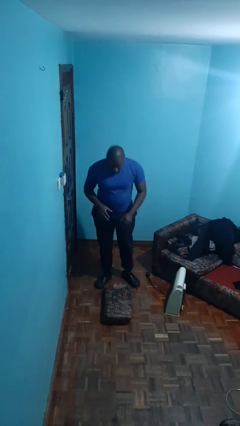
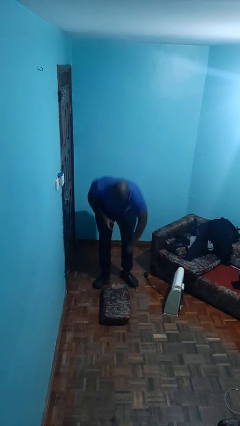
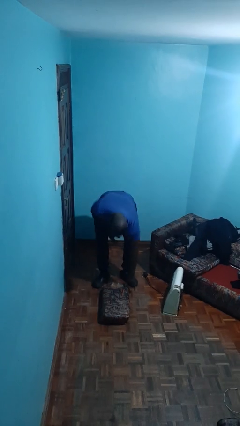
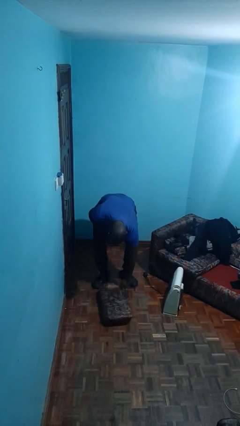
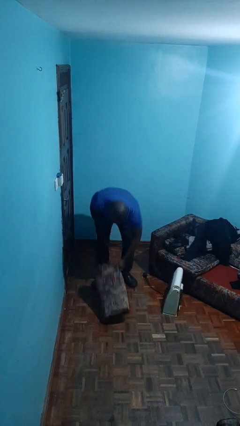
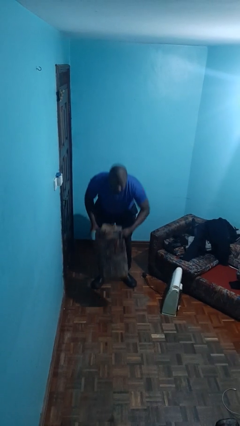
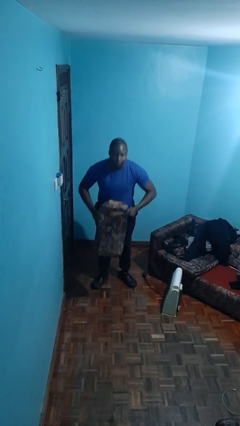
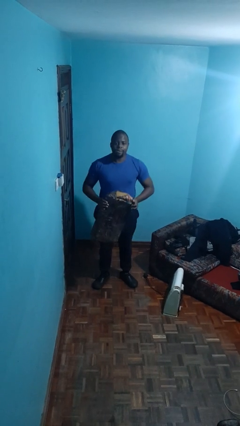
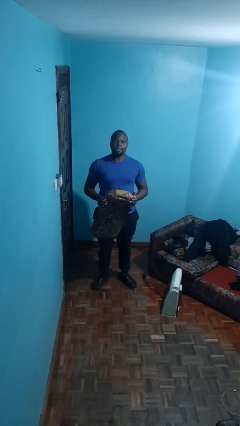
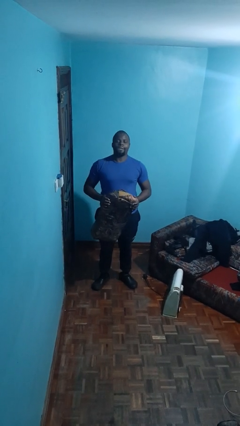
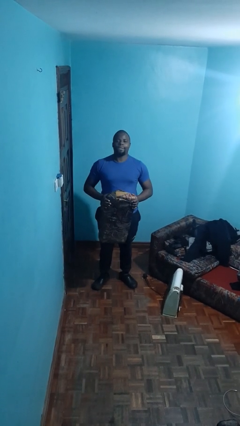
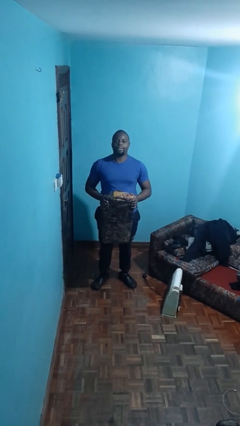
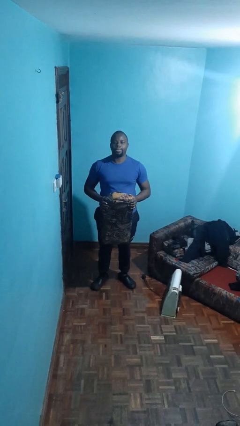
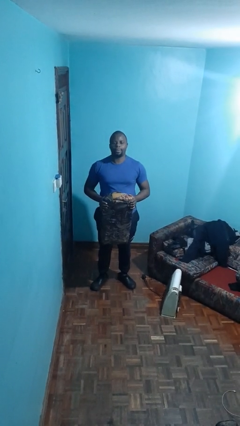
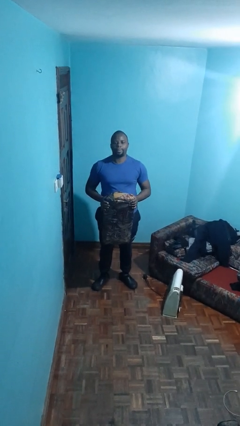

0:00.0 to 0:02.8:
person picks up object from floor

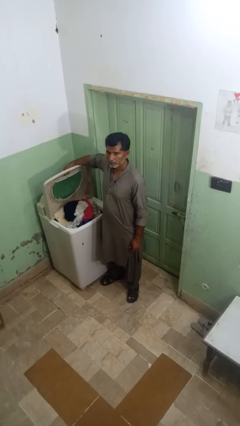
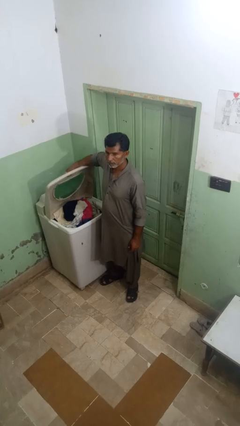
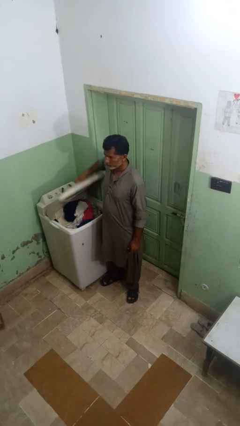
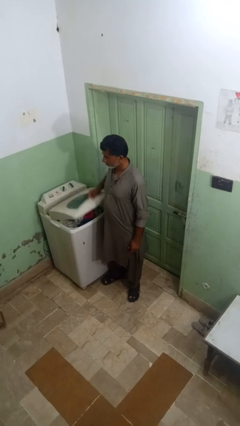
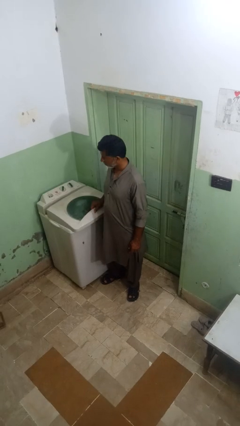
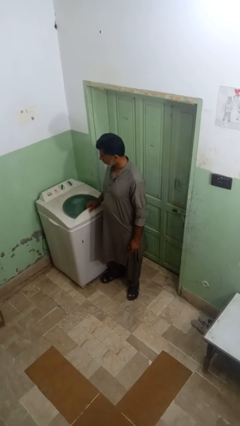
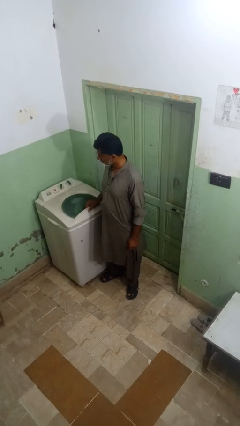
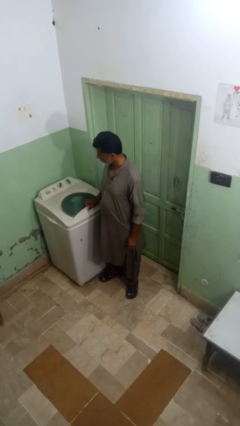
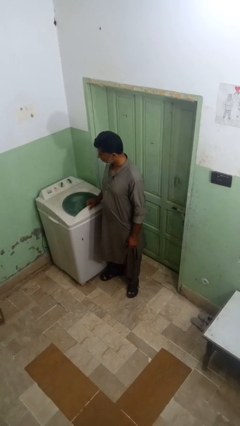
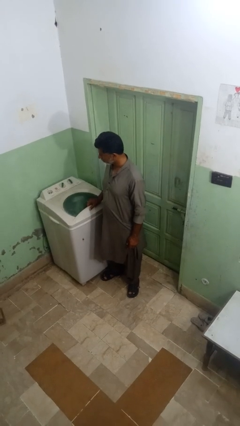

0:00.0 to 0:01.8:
person closes clothes washer

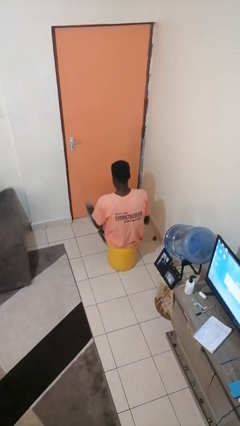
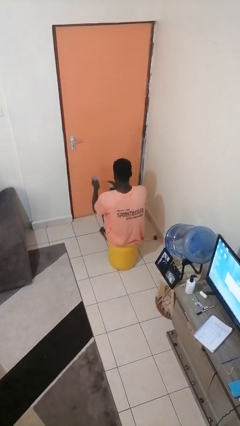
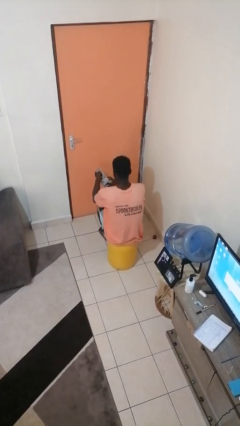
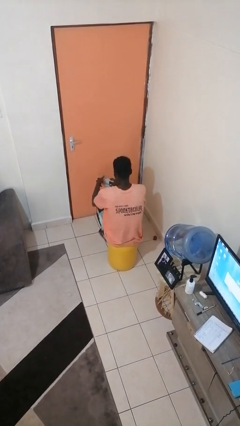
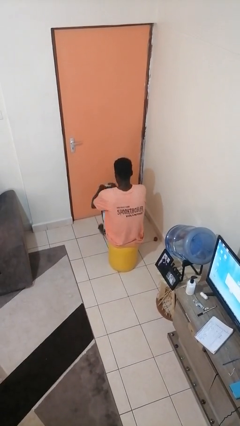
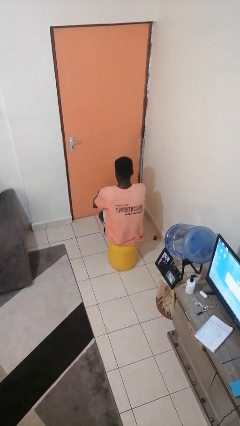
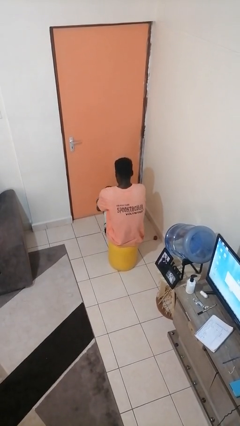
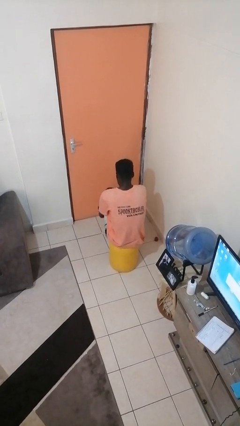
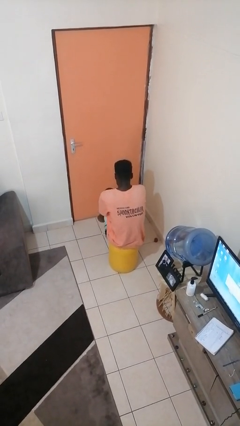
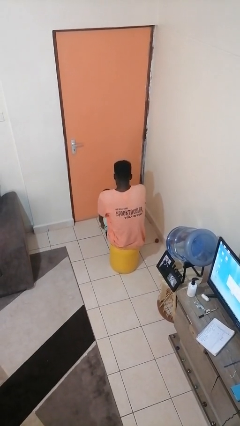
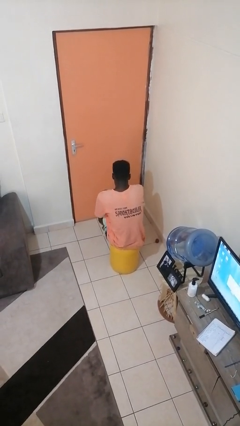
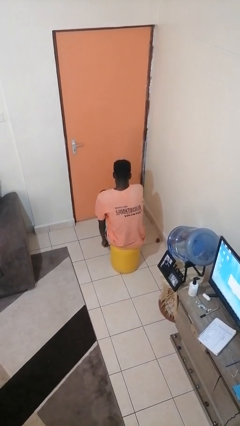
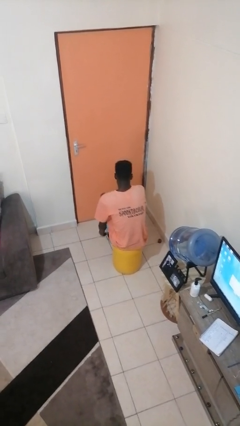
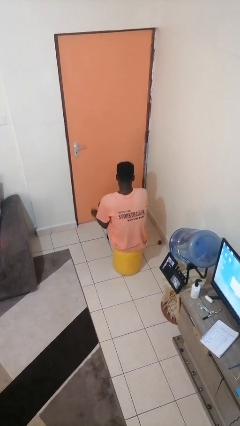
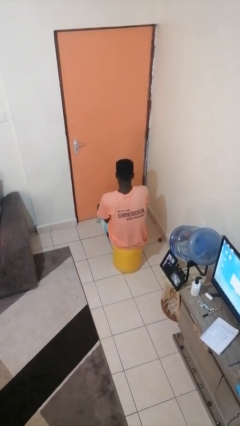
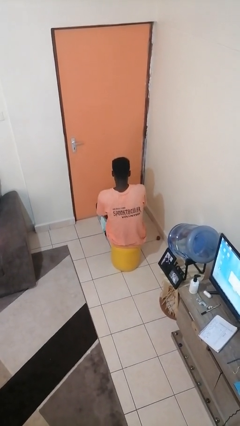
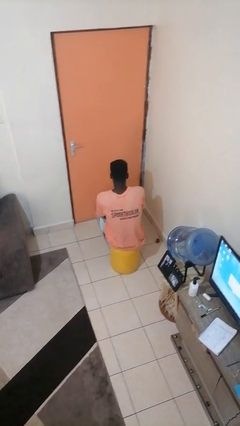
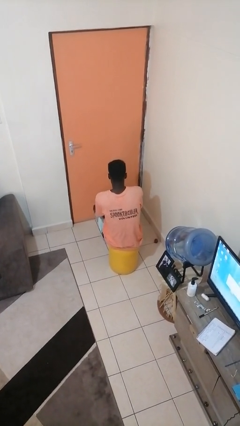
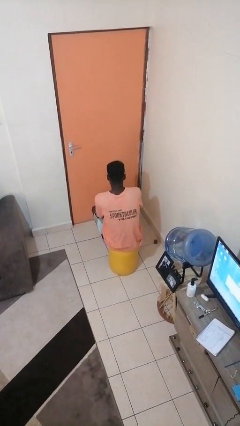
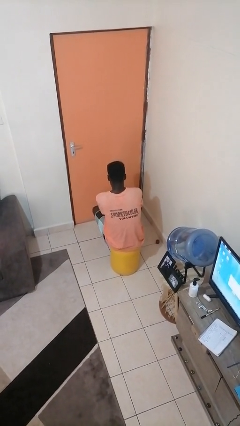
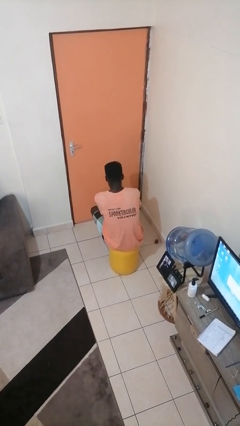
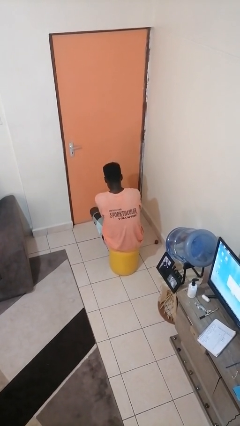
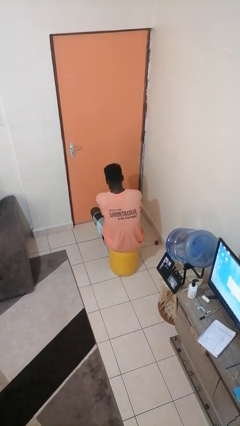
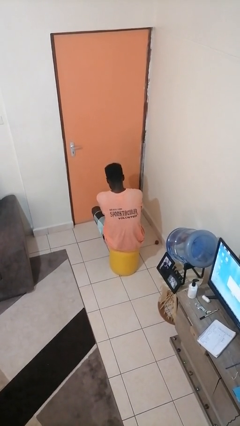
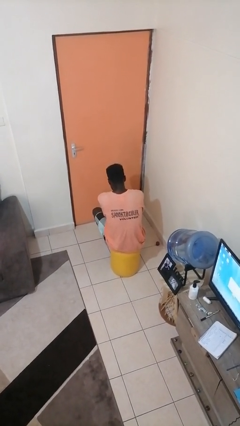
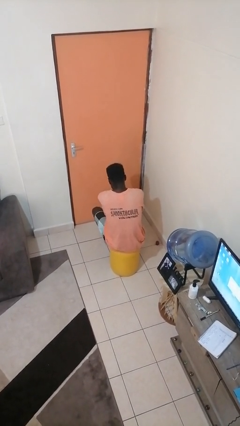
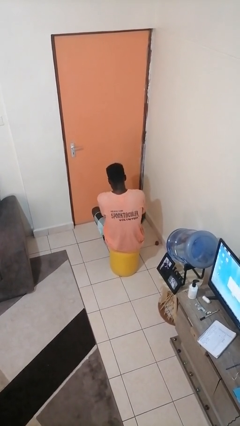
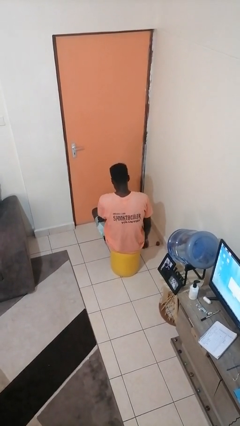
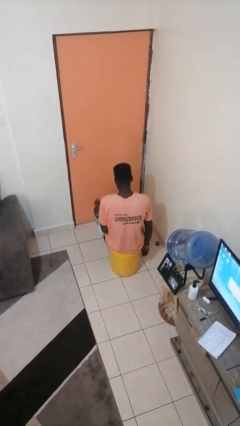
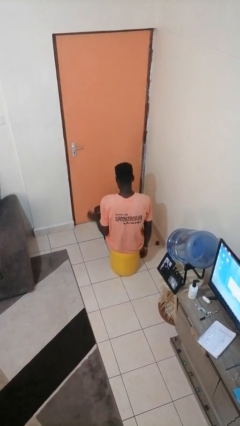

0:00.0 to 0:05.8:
person puts on socks

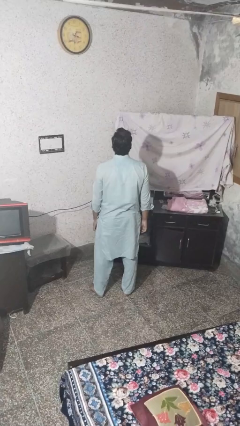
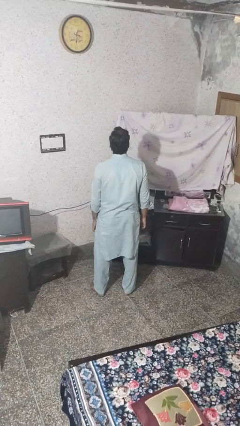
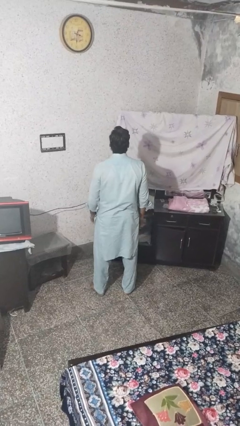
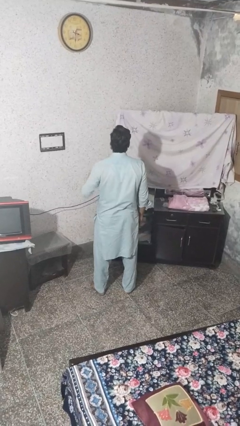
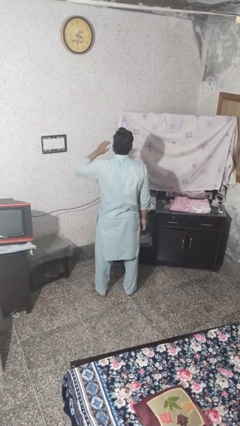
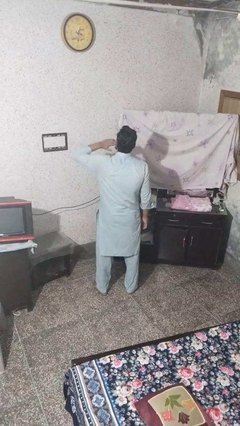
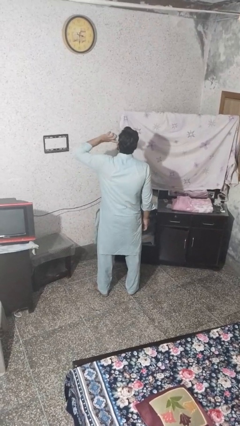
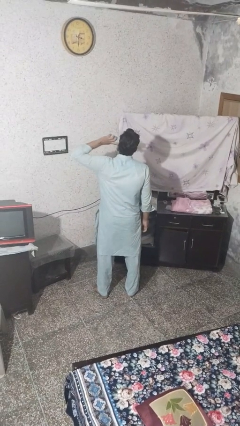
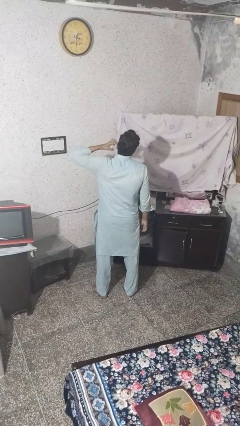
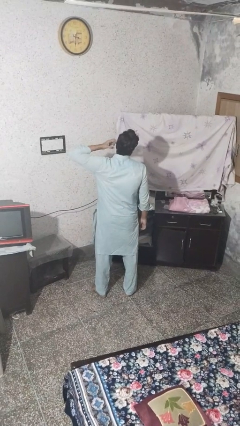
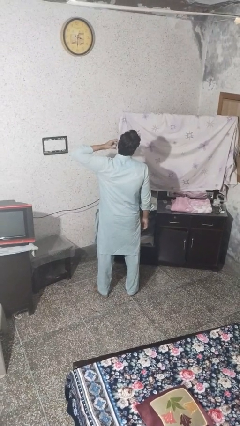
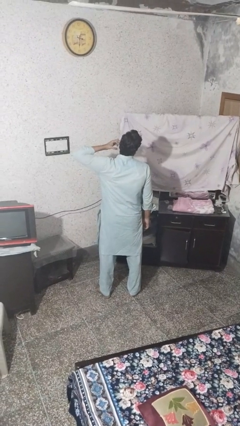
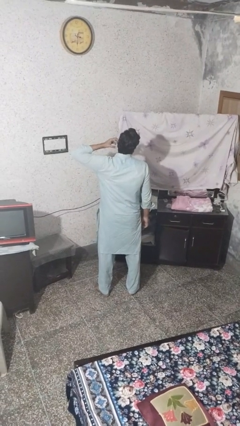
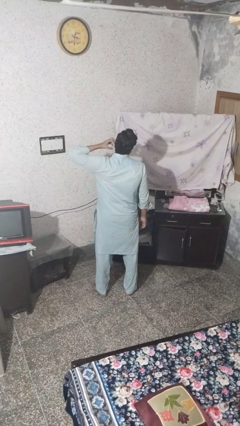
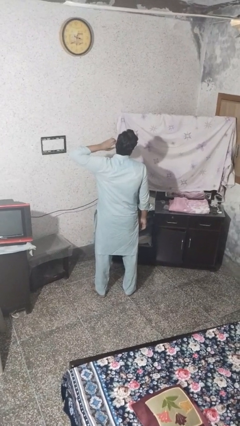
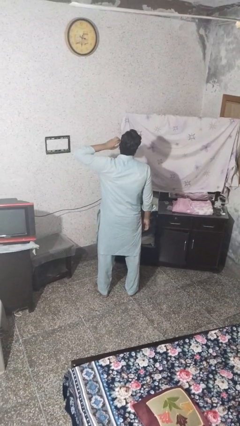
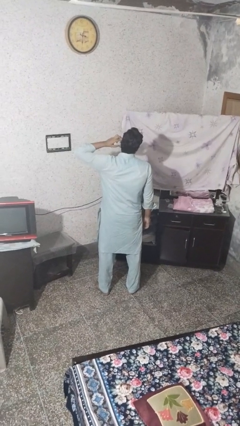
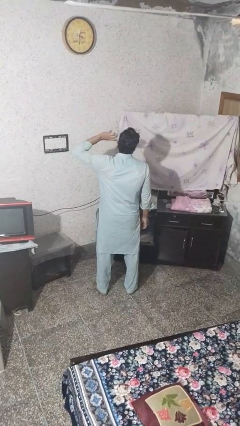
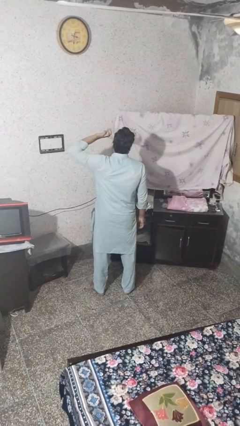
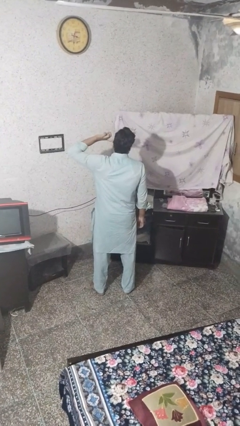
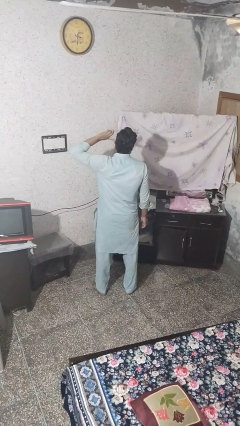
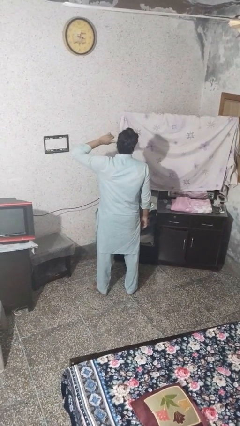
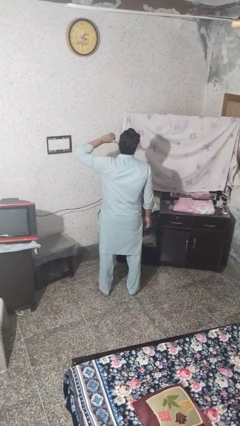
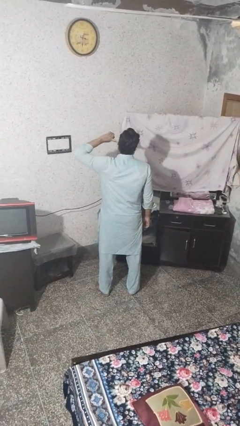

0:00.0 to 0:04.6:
person puts fingers in ear

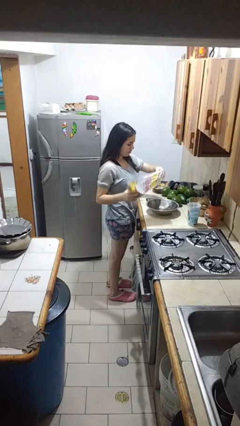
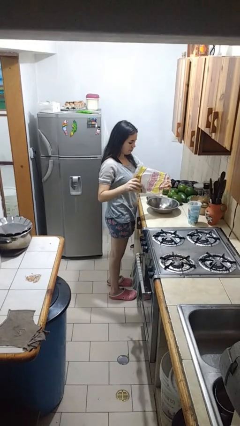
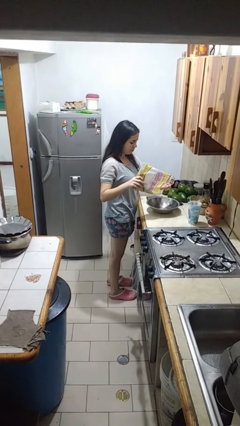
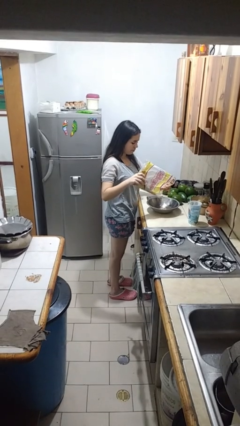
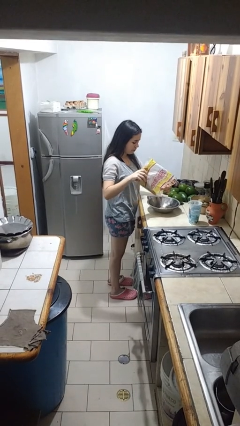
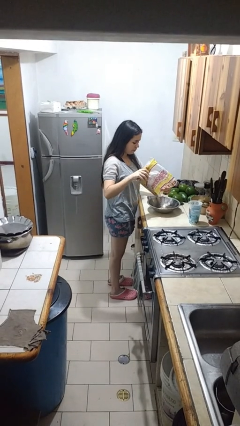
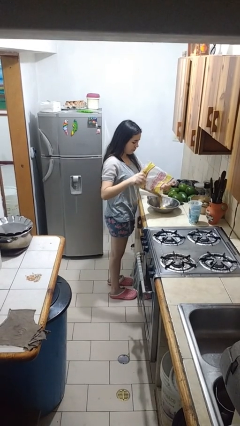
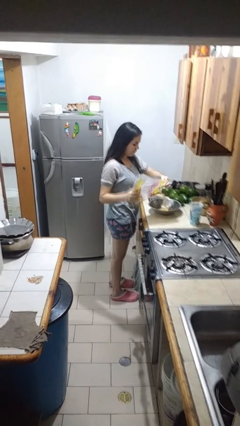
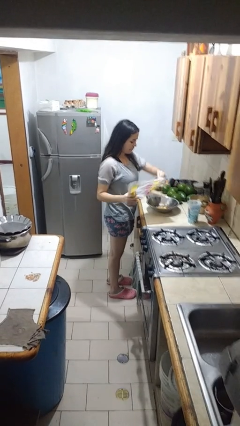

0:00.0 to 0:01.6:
person pours into bowl

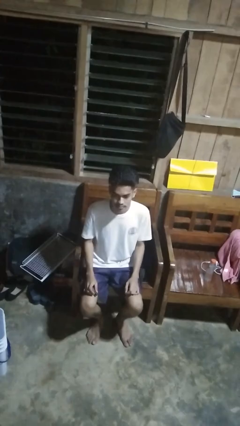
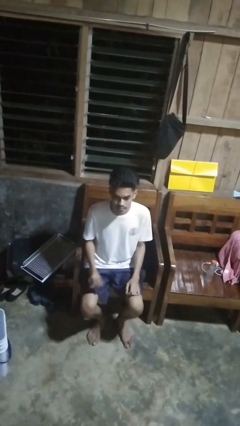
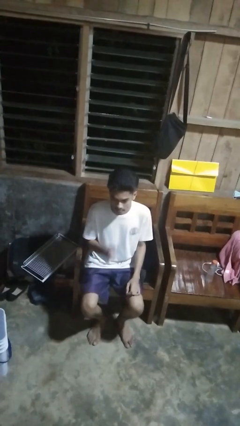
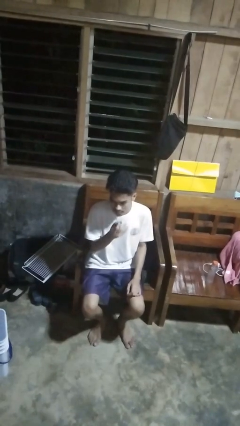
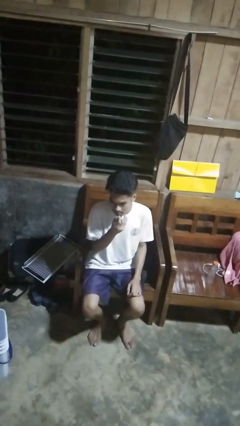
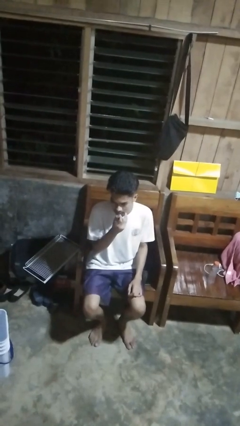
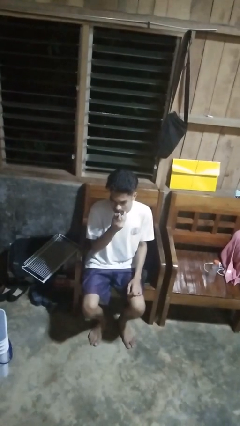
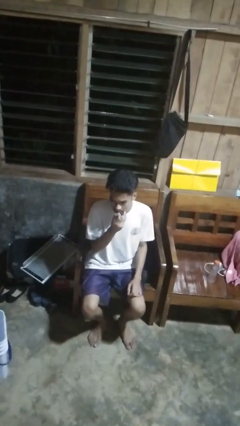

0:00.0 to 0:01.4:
person applies lip makeup
